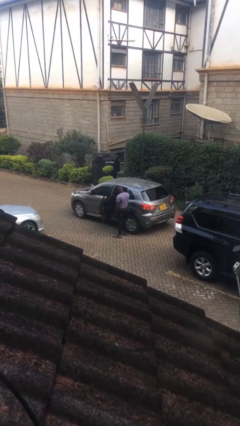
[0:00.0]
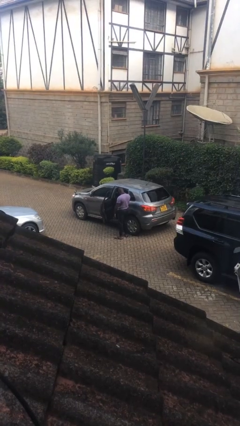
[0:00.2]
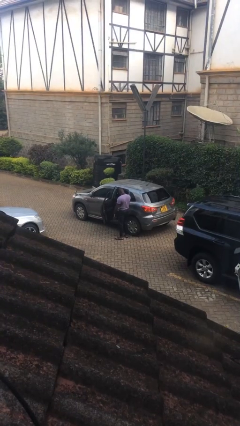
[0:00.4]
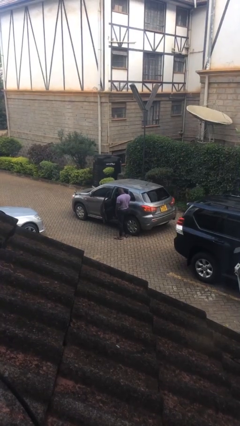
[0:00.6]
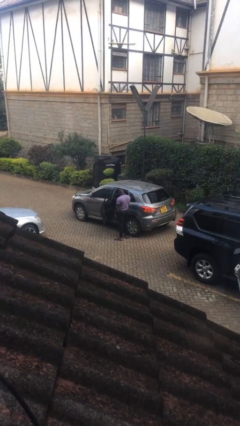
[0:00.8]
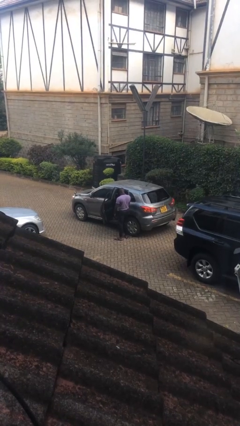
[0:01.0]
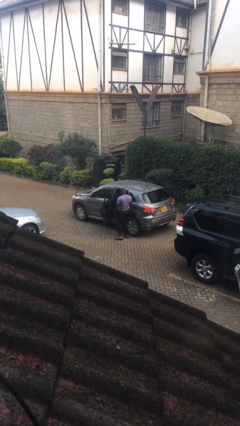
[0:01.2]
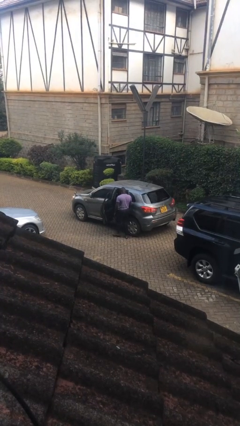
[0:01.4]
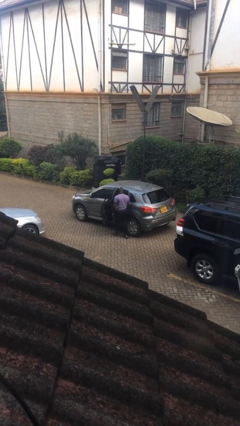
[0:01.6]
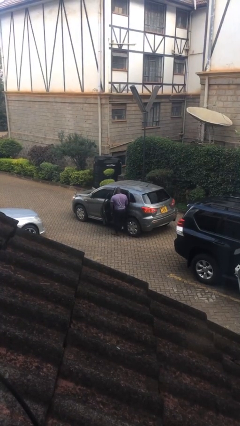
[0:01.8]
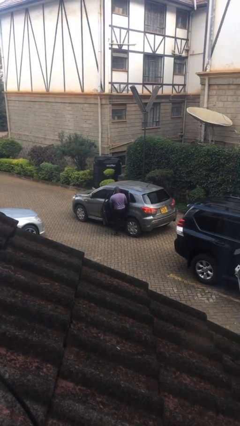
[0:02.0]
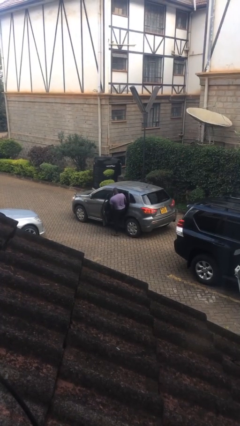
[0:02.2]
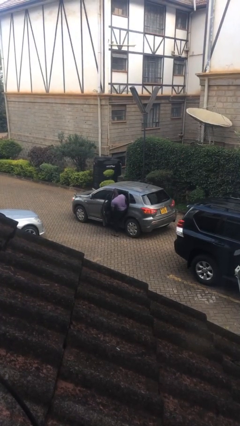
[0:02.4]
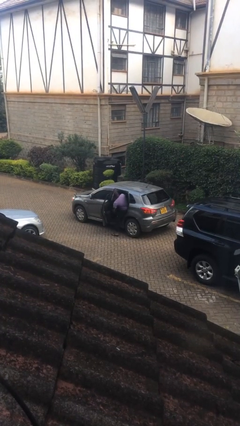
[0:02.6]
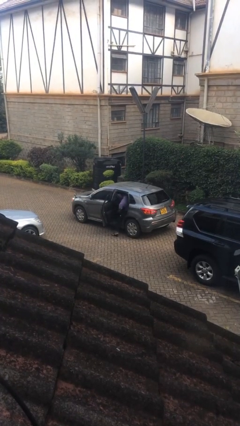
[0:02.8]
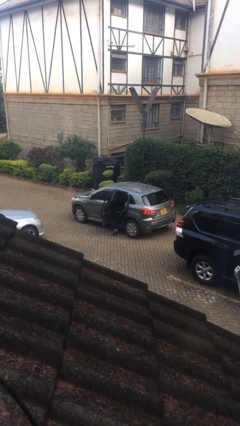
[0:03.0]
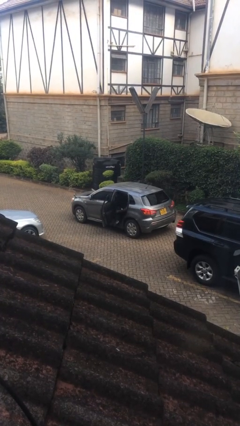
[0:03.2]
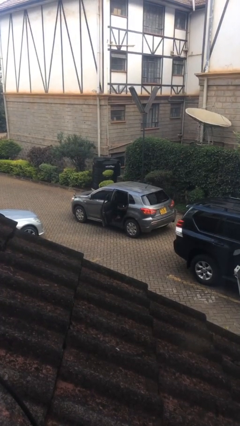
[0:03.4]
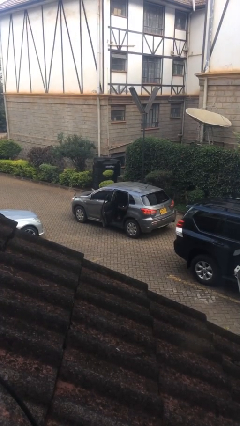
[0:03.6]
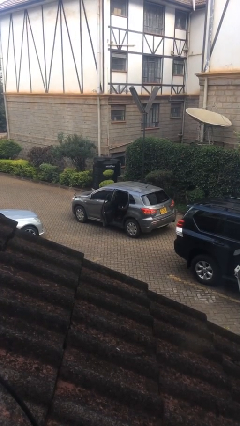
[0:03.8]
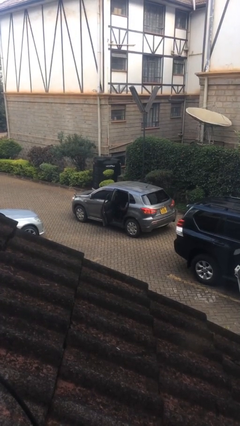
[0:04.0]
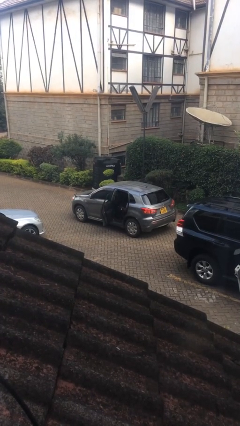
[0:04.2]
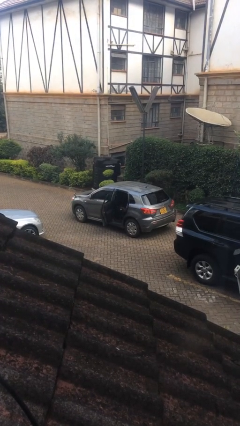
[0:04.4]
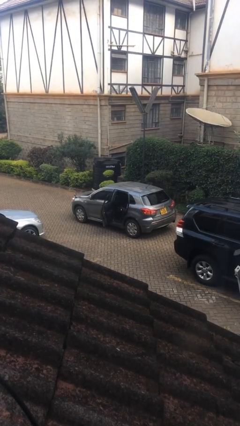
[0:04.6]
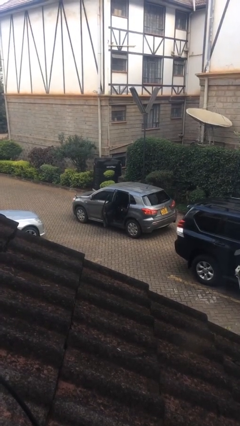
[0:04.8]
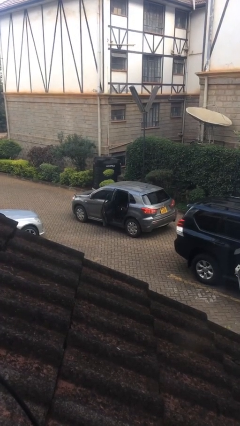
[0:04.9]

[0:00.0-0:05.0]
person enters car

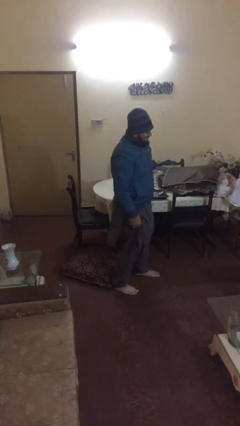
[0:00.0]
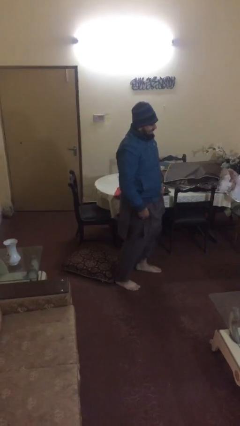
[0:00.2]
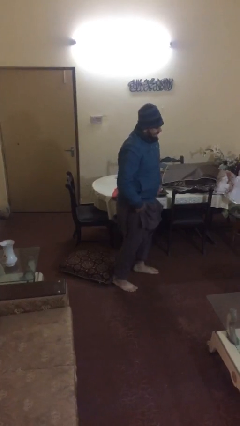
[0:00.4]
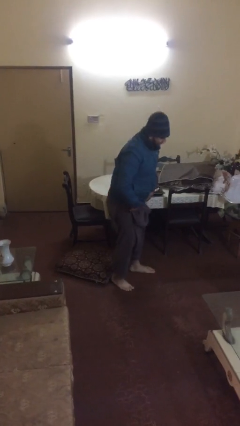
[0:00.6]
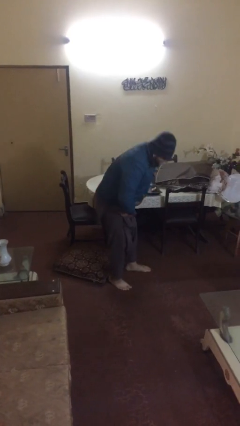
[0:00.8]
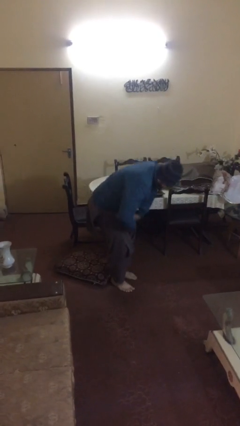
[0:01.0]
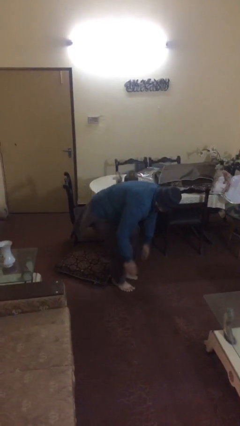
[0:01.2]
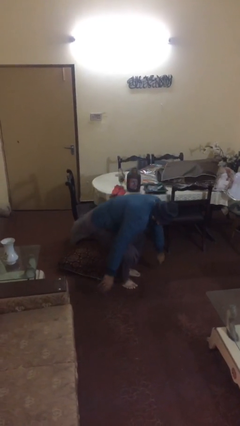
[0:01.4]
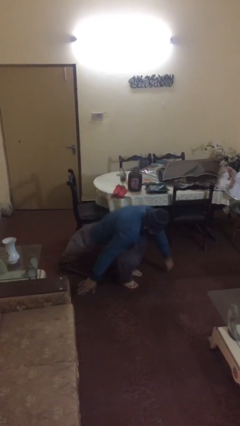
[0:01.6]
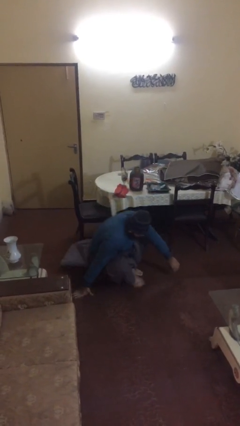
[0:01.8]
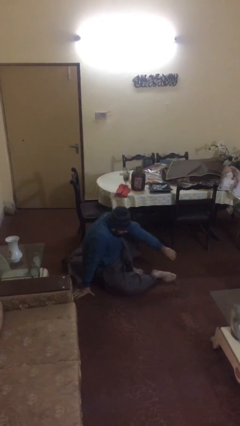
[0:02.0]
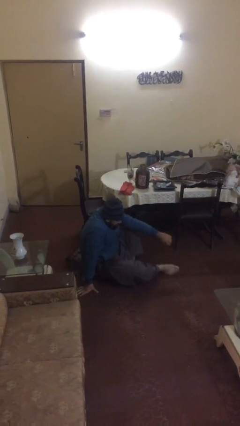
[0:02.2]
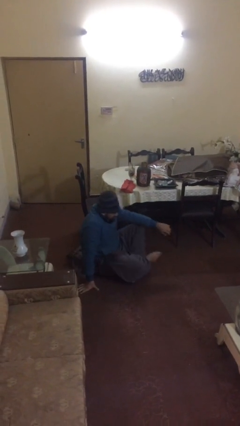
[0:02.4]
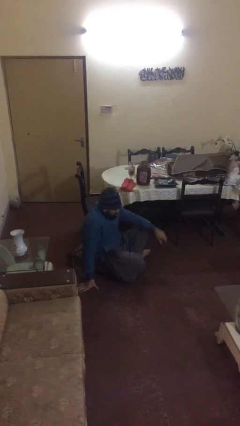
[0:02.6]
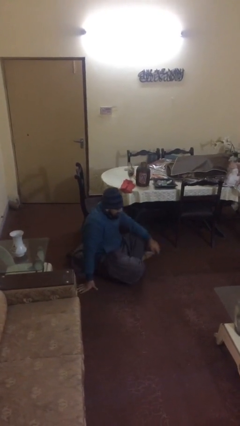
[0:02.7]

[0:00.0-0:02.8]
person sits down

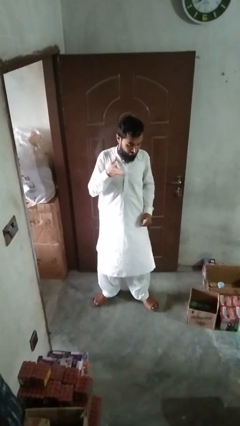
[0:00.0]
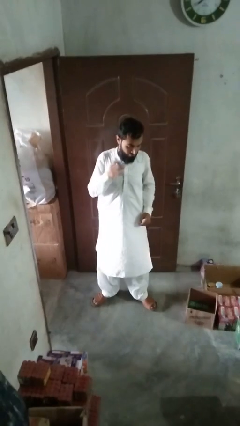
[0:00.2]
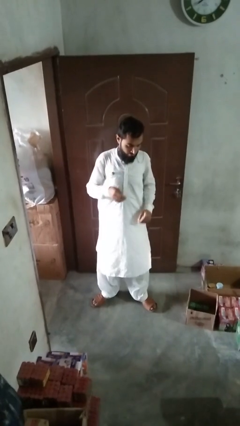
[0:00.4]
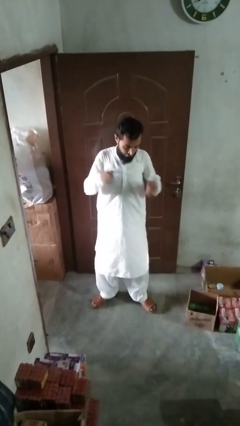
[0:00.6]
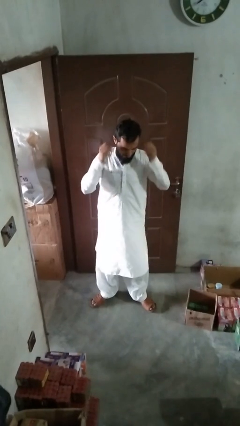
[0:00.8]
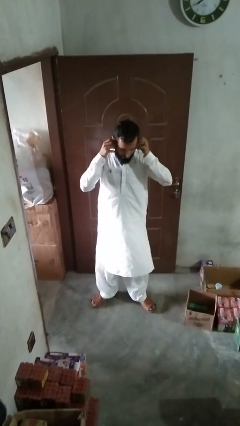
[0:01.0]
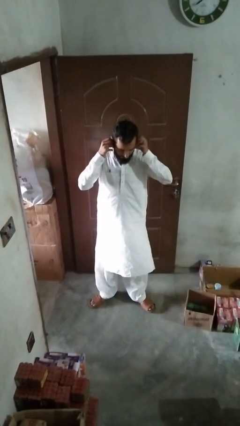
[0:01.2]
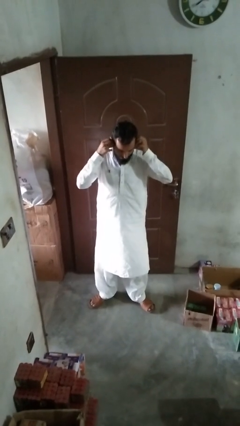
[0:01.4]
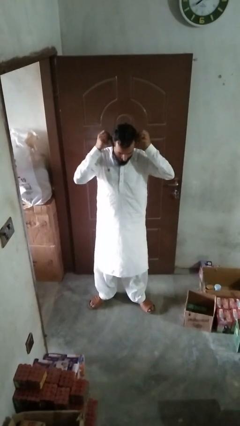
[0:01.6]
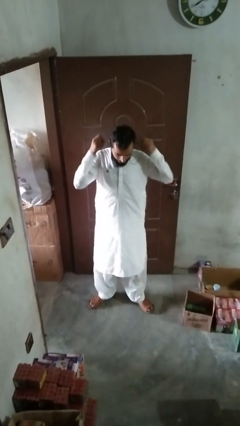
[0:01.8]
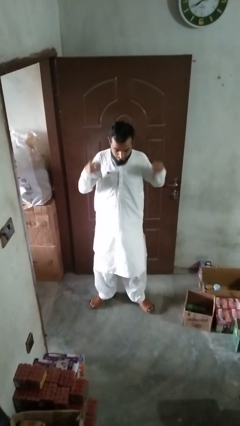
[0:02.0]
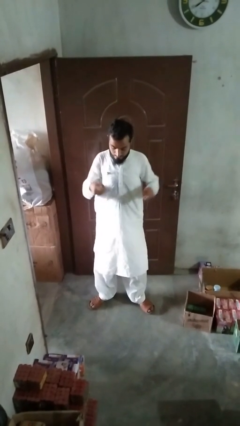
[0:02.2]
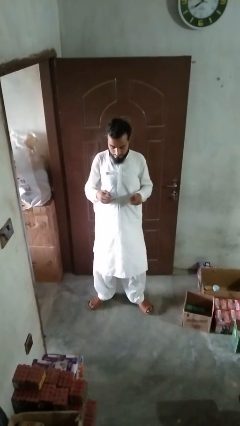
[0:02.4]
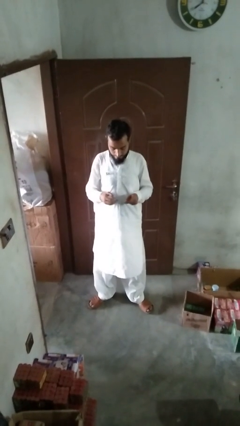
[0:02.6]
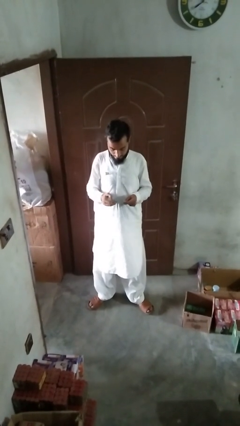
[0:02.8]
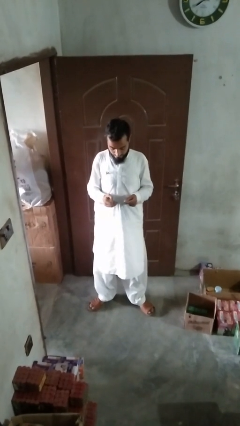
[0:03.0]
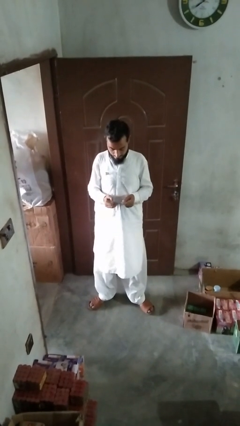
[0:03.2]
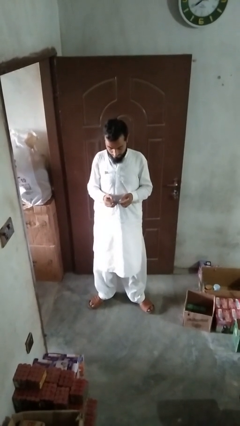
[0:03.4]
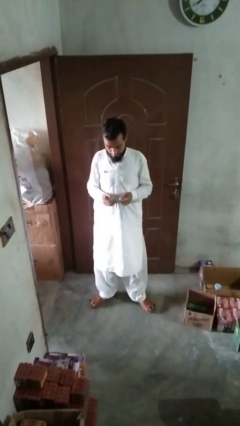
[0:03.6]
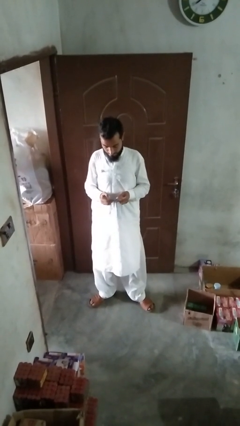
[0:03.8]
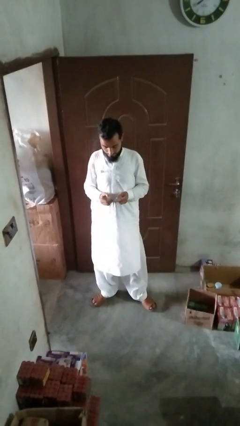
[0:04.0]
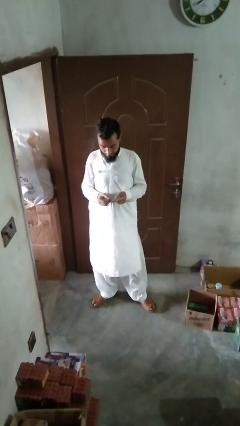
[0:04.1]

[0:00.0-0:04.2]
person takes off earrings

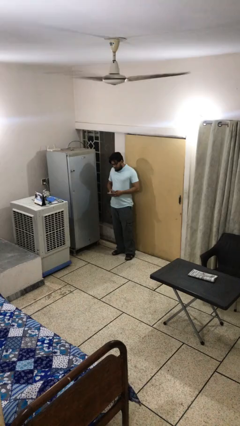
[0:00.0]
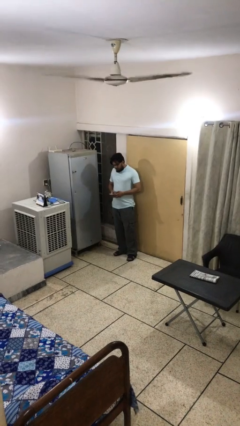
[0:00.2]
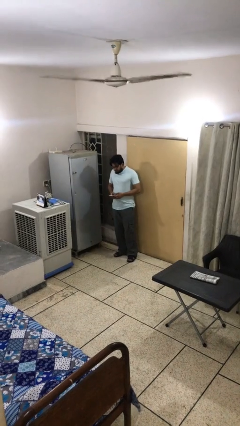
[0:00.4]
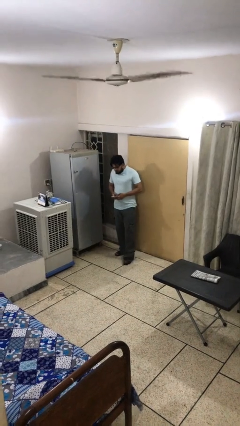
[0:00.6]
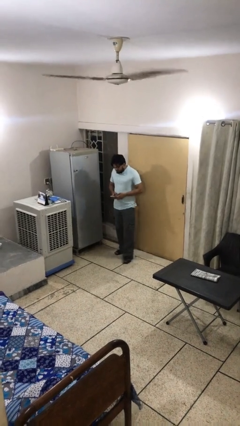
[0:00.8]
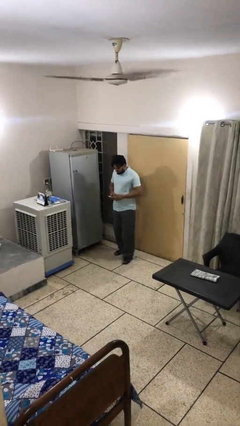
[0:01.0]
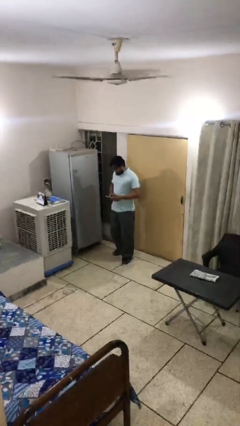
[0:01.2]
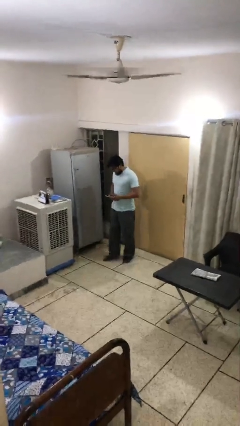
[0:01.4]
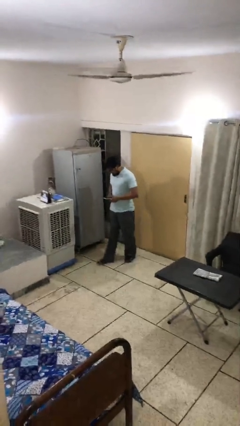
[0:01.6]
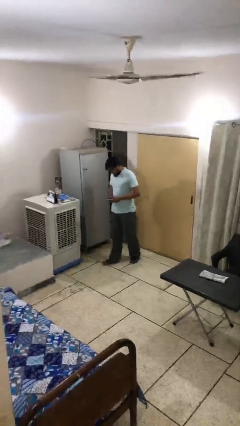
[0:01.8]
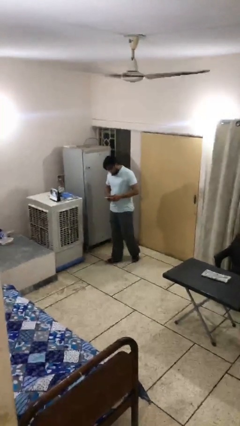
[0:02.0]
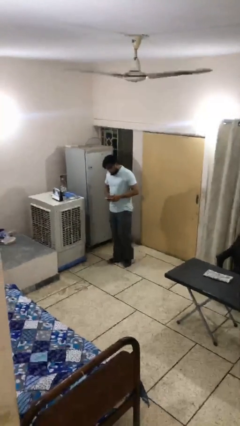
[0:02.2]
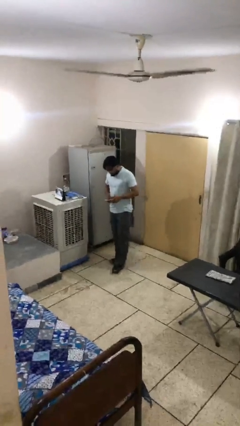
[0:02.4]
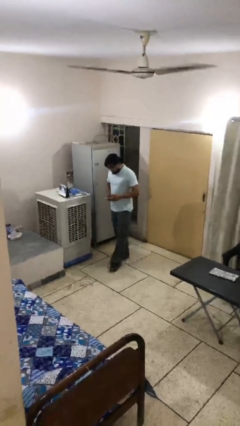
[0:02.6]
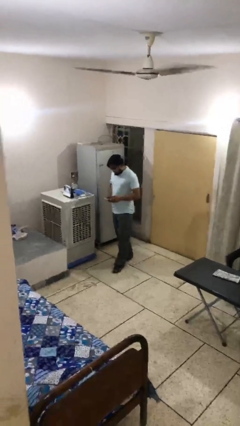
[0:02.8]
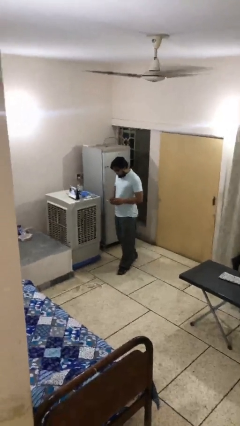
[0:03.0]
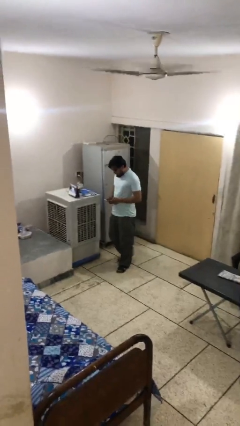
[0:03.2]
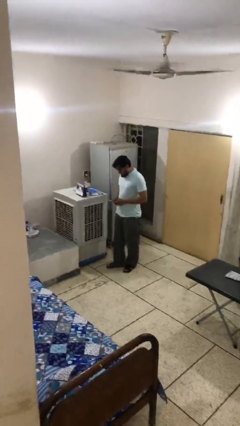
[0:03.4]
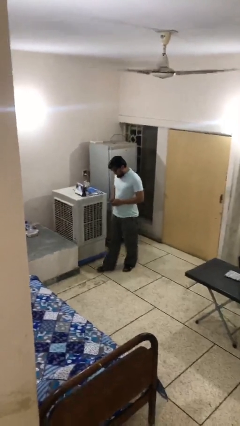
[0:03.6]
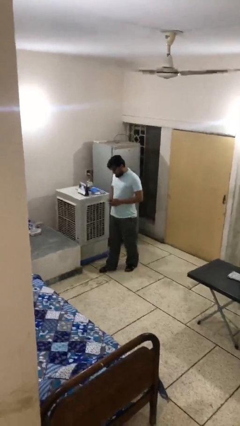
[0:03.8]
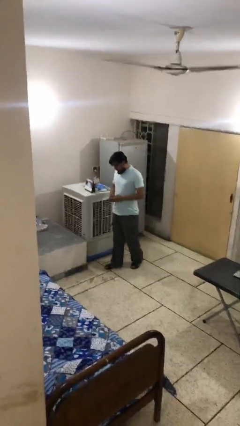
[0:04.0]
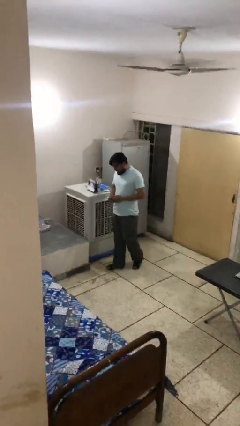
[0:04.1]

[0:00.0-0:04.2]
person texts on phone

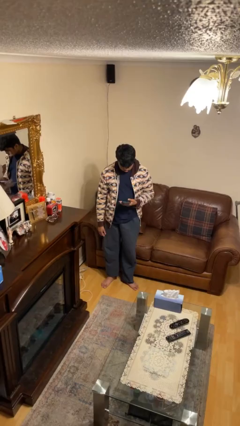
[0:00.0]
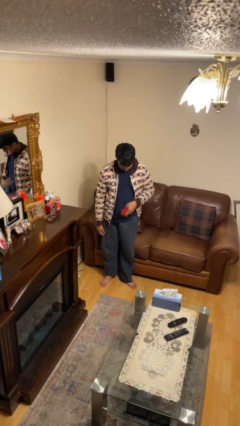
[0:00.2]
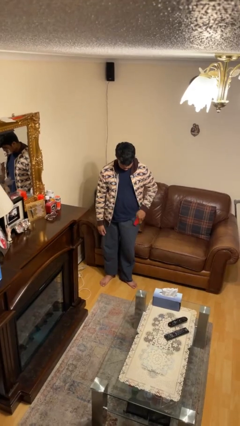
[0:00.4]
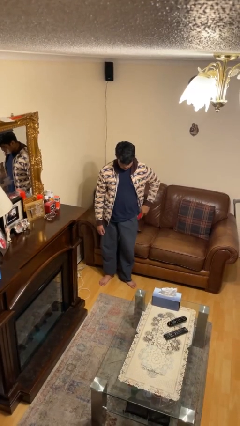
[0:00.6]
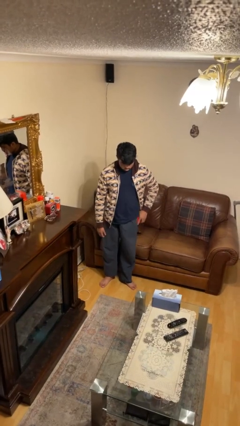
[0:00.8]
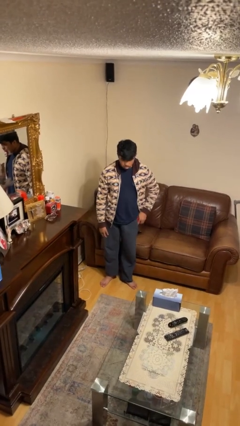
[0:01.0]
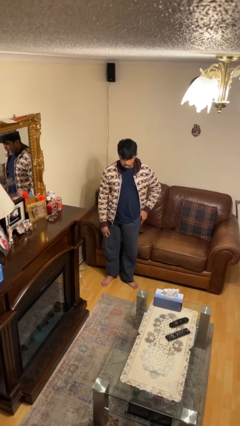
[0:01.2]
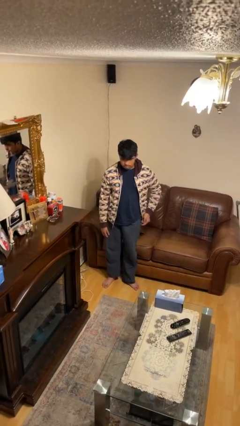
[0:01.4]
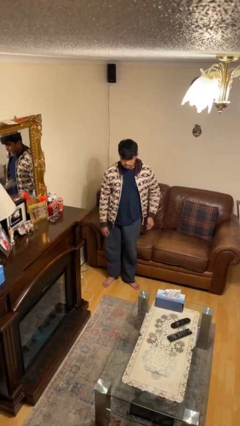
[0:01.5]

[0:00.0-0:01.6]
person puts phone into pocket
